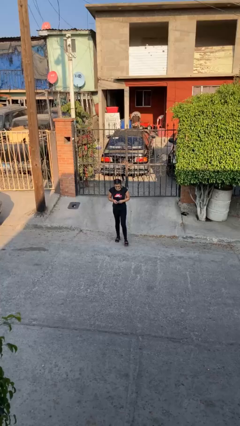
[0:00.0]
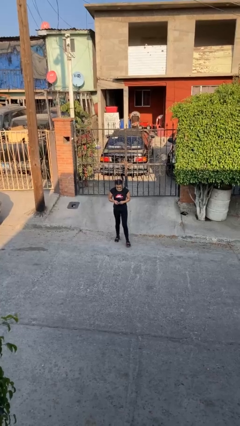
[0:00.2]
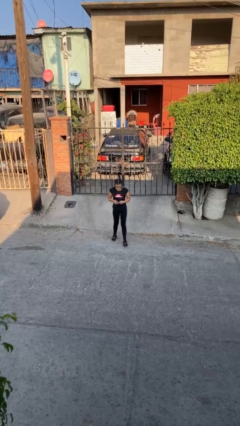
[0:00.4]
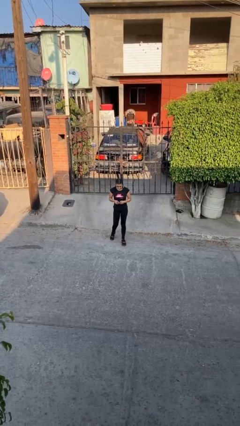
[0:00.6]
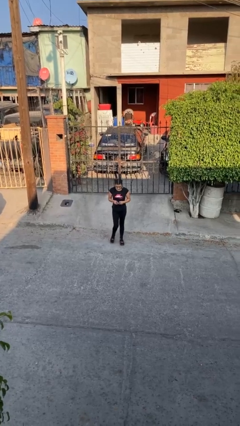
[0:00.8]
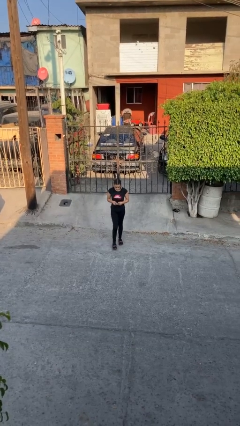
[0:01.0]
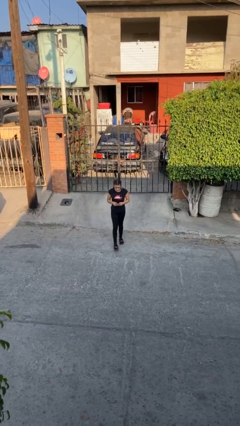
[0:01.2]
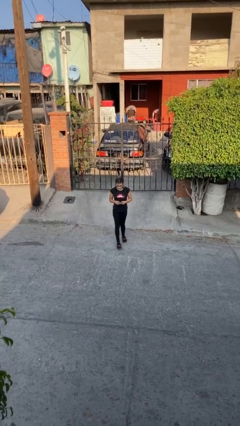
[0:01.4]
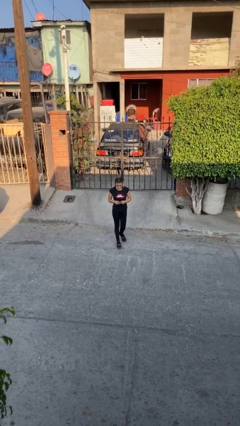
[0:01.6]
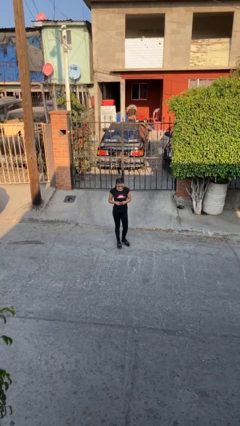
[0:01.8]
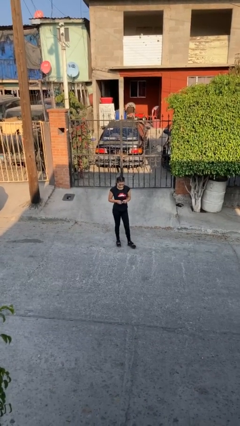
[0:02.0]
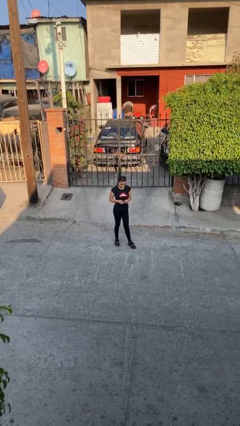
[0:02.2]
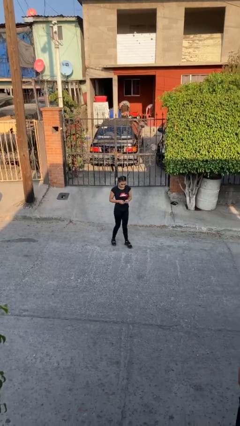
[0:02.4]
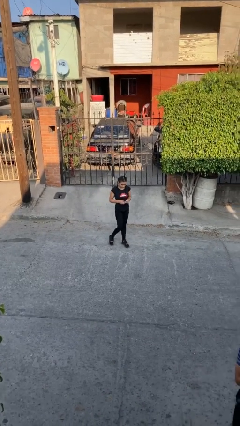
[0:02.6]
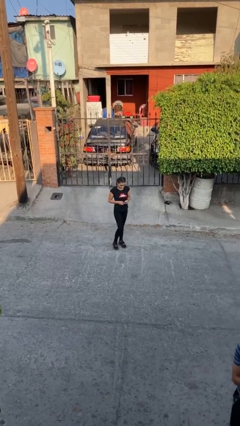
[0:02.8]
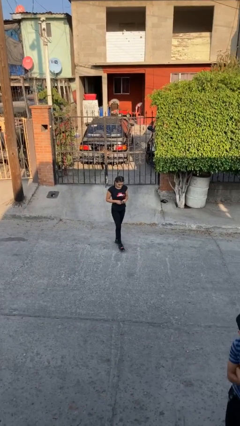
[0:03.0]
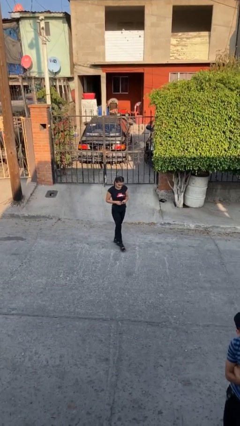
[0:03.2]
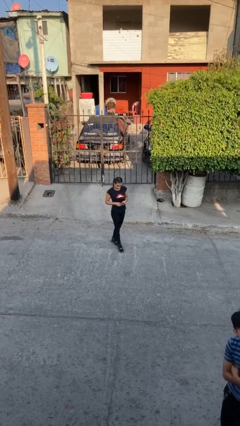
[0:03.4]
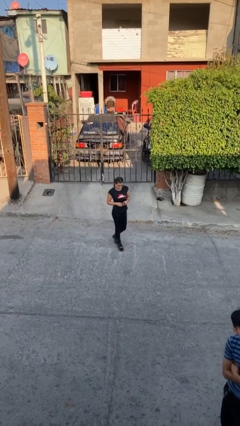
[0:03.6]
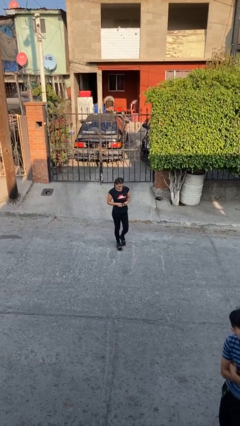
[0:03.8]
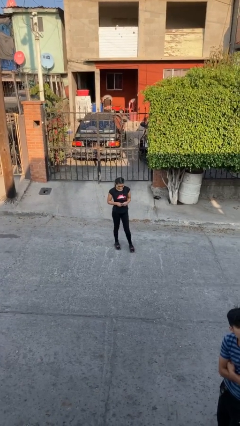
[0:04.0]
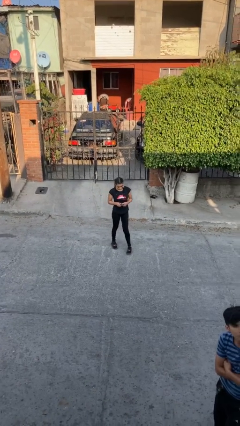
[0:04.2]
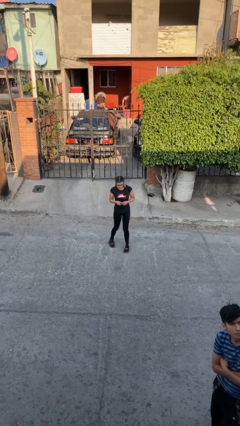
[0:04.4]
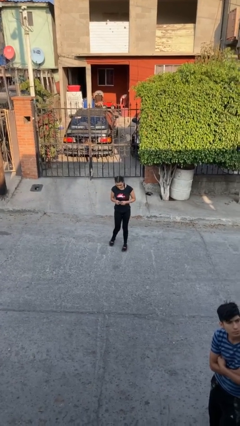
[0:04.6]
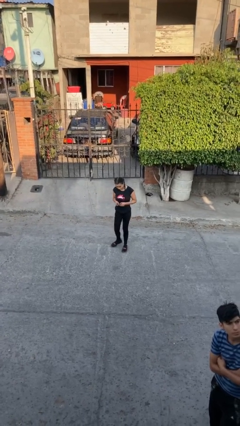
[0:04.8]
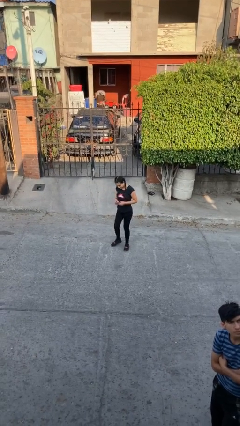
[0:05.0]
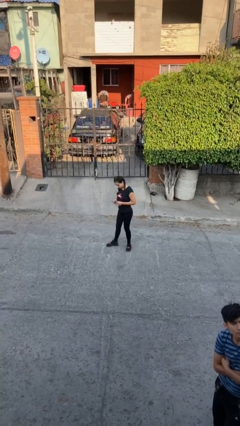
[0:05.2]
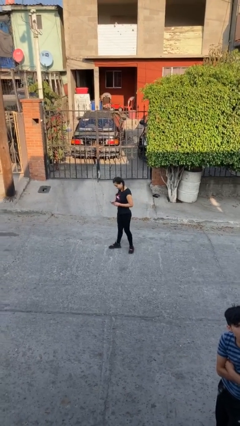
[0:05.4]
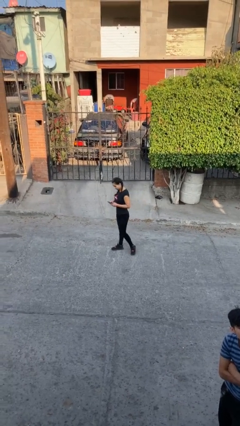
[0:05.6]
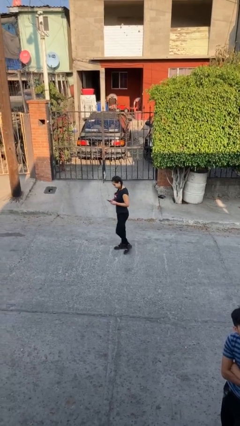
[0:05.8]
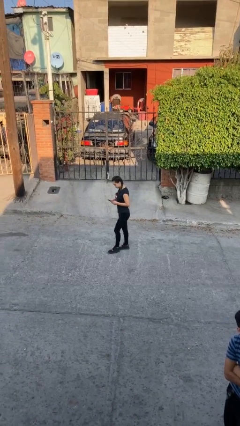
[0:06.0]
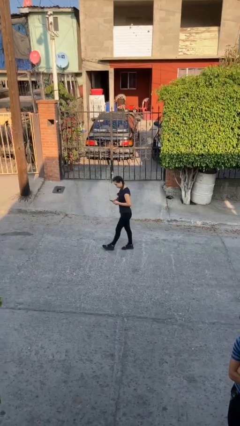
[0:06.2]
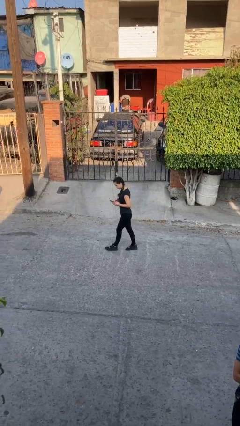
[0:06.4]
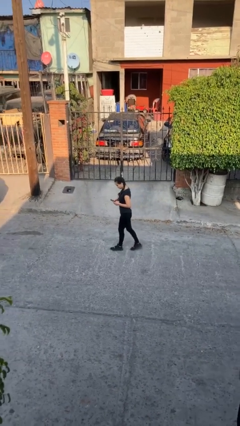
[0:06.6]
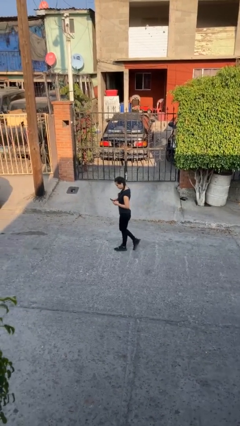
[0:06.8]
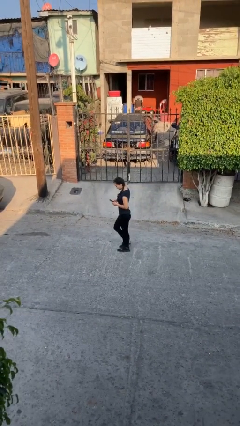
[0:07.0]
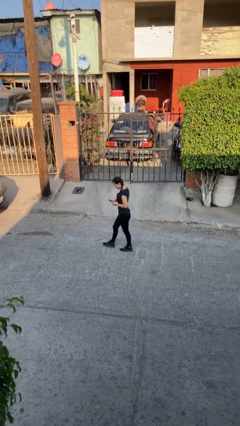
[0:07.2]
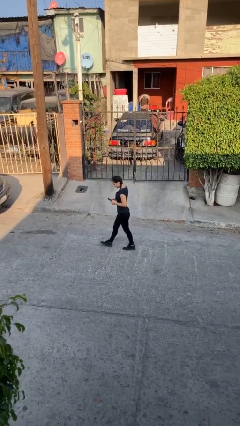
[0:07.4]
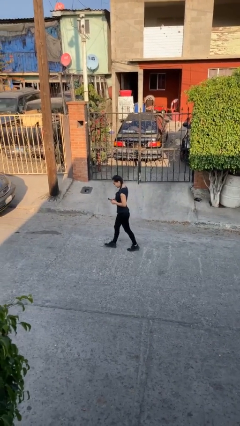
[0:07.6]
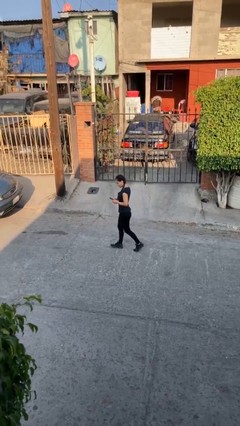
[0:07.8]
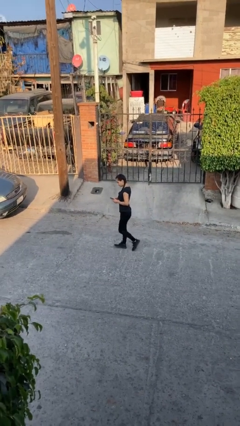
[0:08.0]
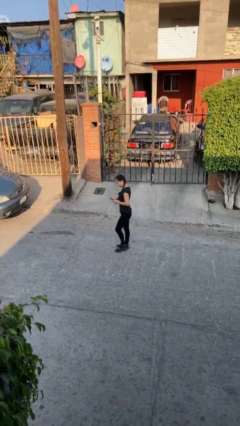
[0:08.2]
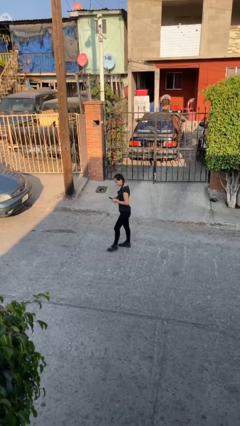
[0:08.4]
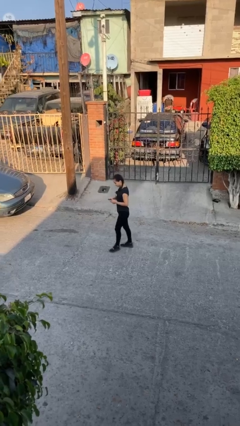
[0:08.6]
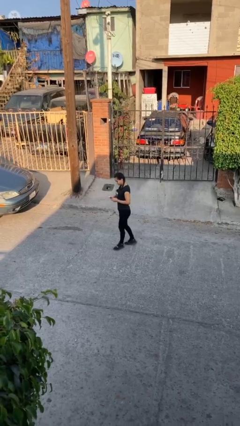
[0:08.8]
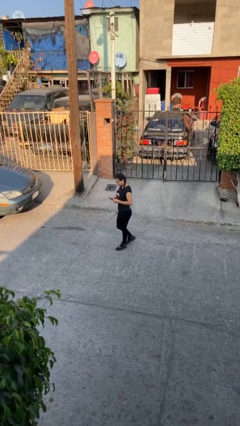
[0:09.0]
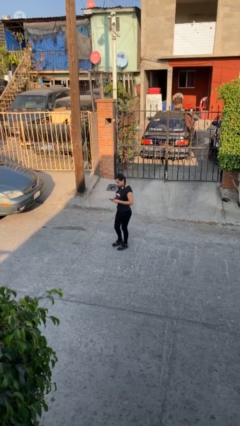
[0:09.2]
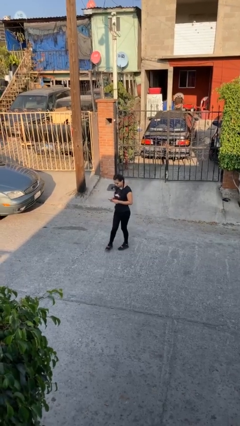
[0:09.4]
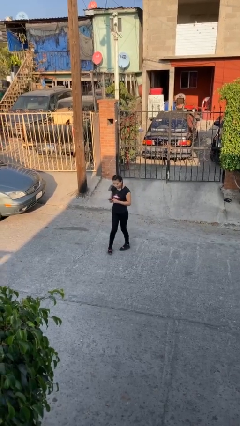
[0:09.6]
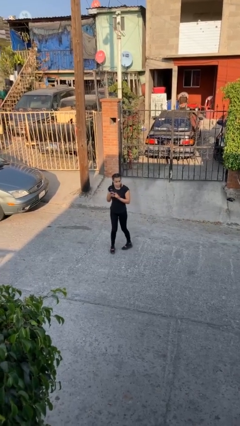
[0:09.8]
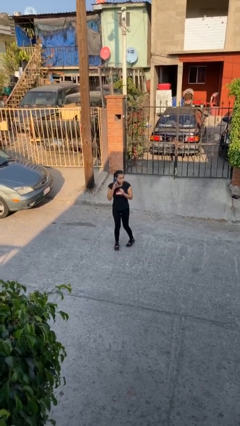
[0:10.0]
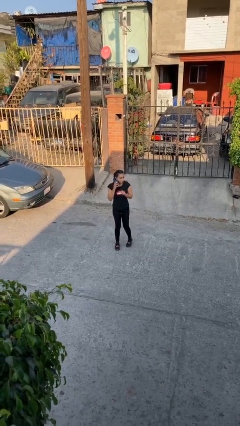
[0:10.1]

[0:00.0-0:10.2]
person texts on phone

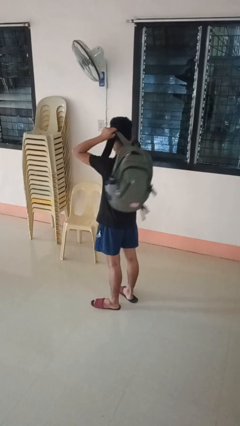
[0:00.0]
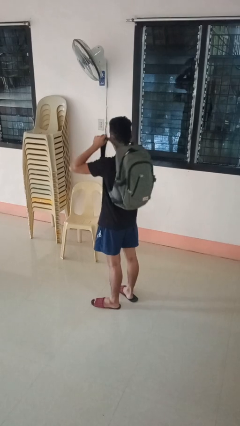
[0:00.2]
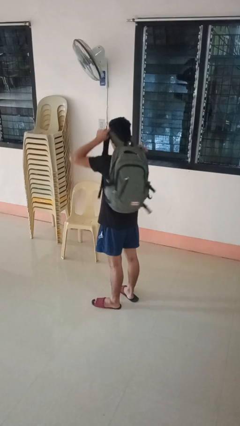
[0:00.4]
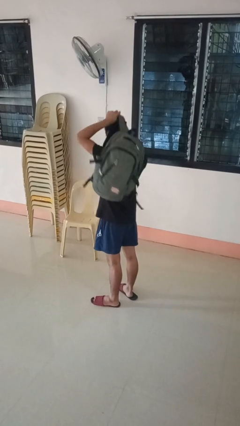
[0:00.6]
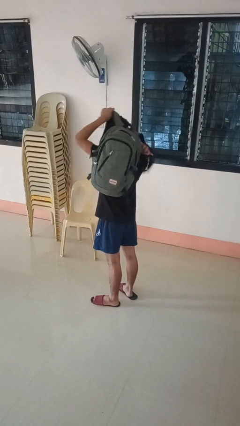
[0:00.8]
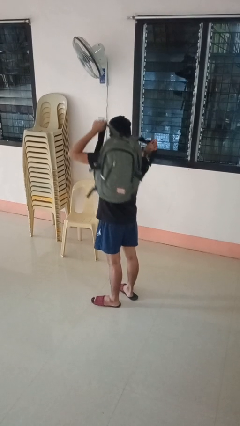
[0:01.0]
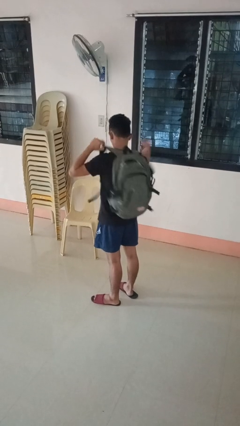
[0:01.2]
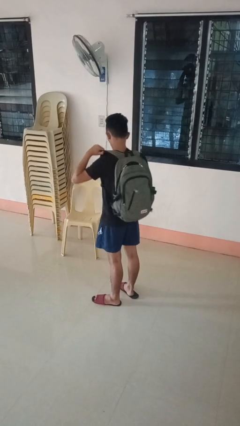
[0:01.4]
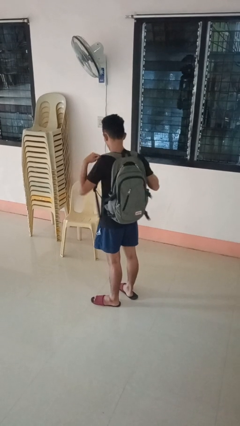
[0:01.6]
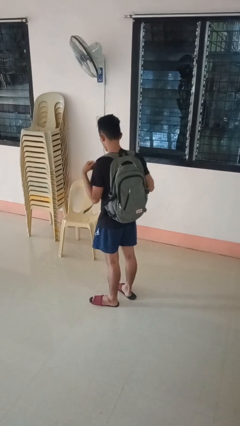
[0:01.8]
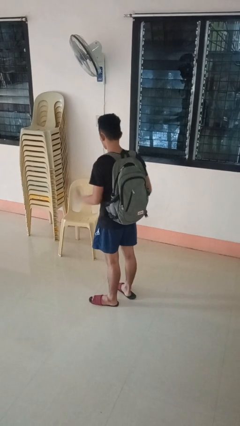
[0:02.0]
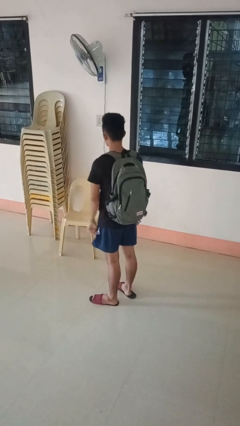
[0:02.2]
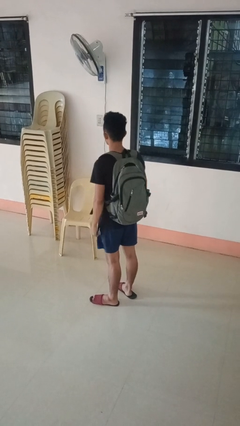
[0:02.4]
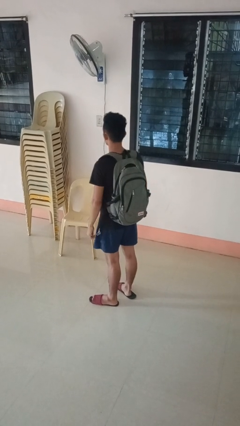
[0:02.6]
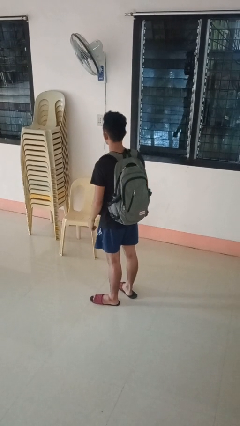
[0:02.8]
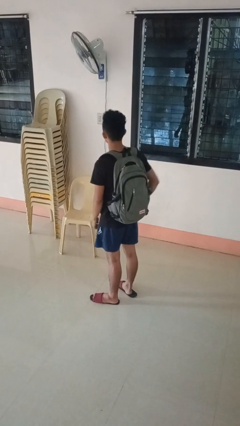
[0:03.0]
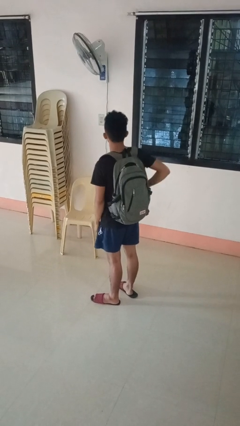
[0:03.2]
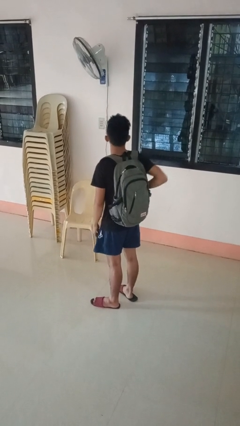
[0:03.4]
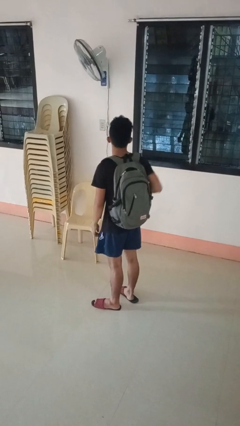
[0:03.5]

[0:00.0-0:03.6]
person puts on backpack

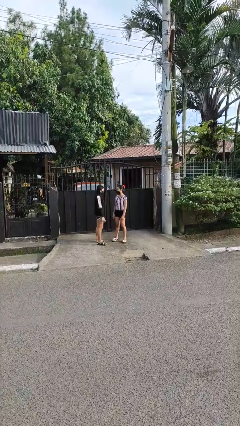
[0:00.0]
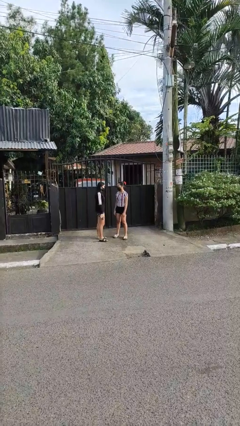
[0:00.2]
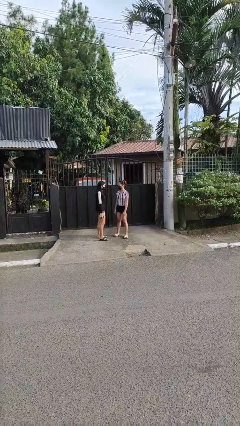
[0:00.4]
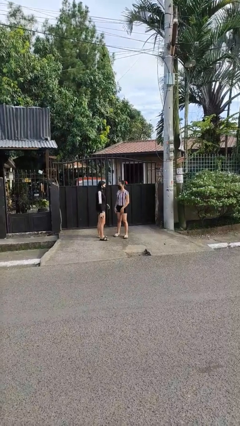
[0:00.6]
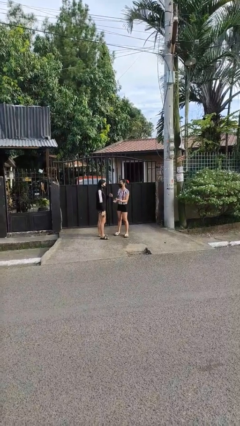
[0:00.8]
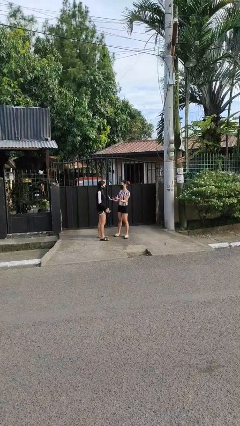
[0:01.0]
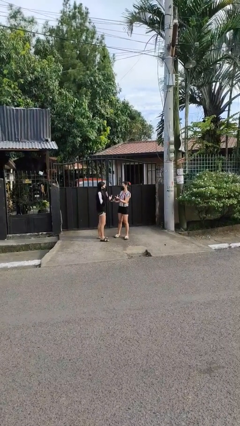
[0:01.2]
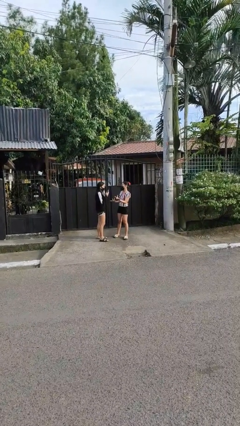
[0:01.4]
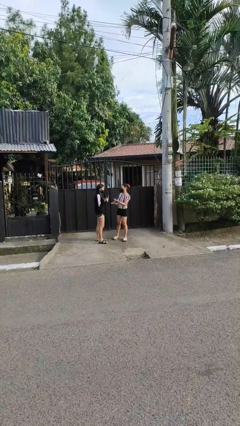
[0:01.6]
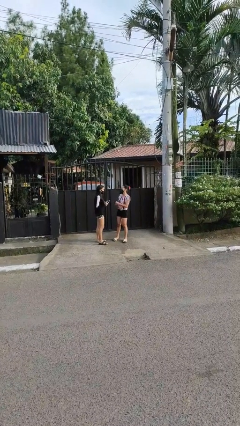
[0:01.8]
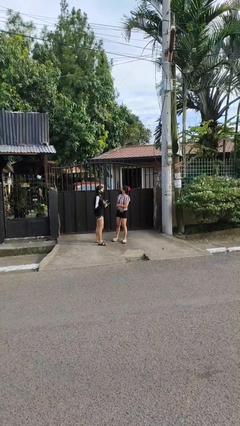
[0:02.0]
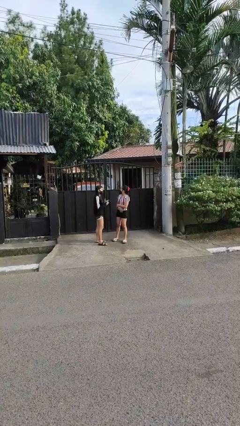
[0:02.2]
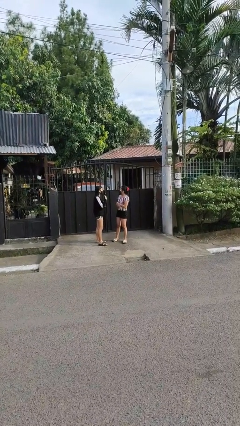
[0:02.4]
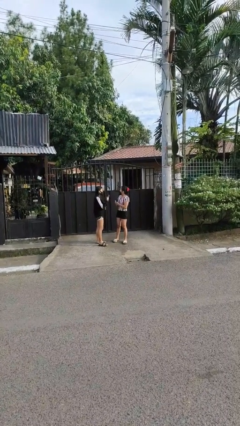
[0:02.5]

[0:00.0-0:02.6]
person talks to person

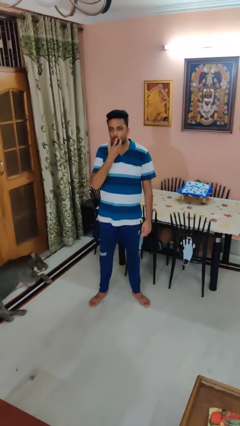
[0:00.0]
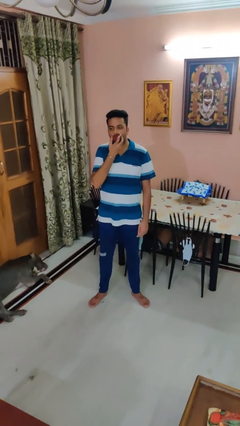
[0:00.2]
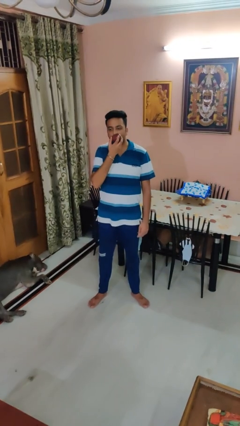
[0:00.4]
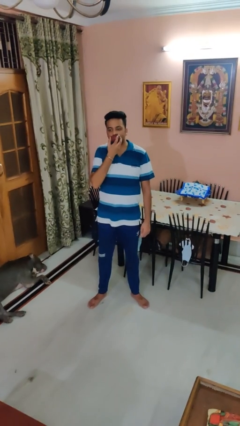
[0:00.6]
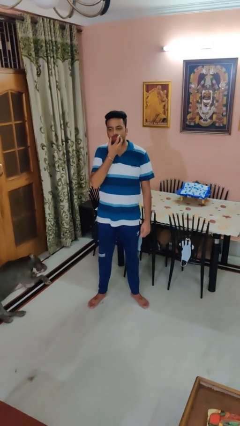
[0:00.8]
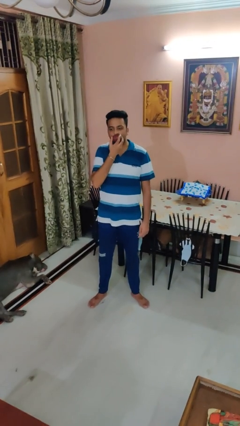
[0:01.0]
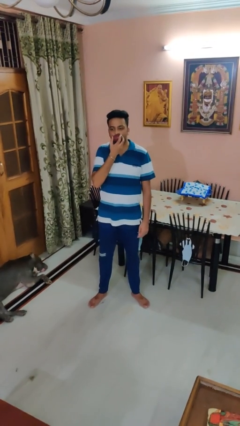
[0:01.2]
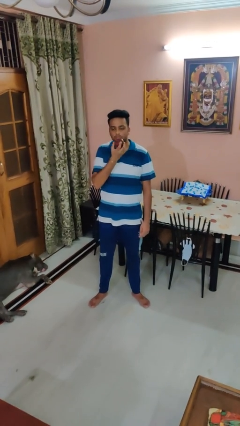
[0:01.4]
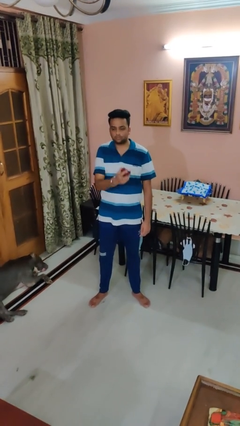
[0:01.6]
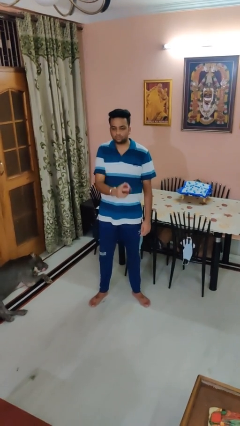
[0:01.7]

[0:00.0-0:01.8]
person eats apple
